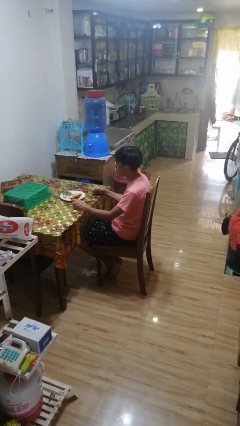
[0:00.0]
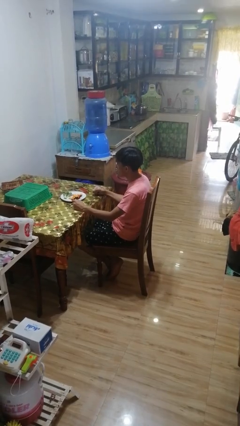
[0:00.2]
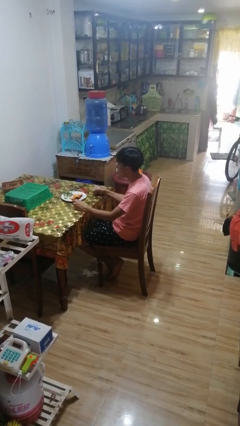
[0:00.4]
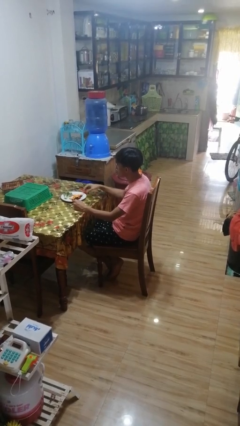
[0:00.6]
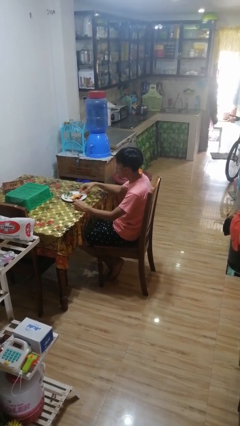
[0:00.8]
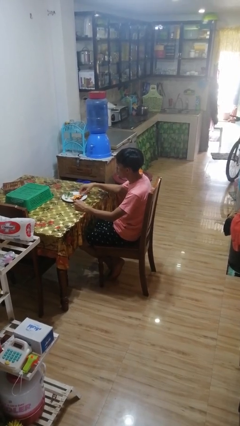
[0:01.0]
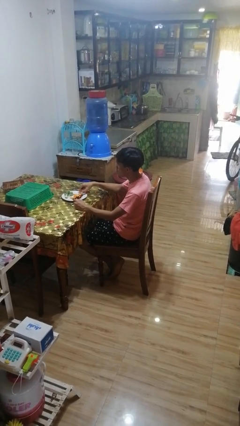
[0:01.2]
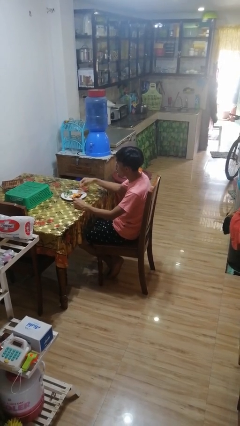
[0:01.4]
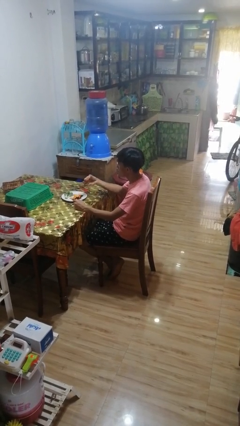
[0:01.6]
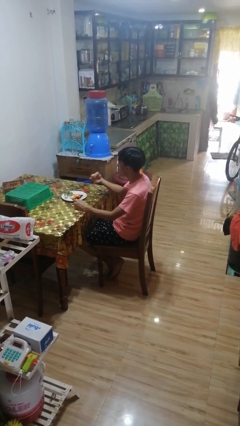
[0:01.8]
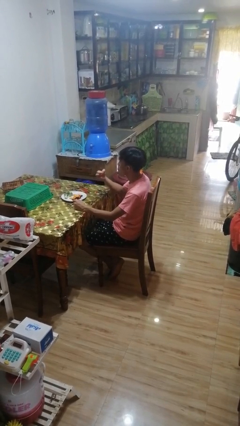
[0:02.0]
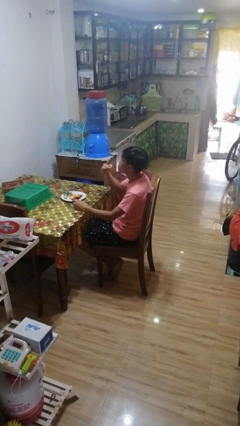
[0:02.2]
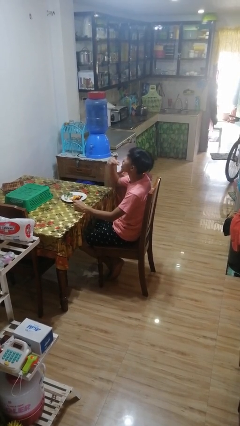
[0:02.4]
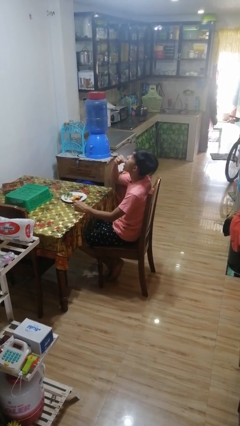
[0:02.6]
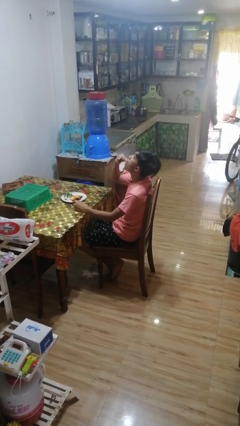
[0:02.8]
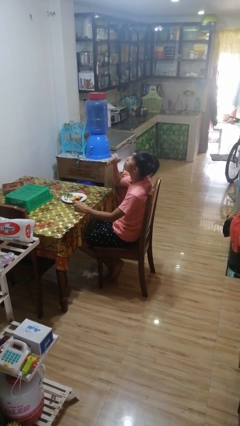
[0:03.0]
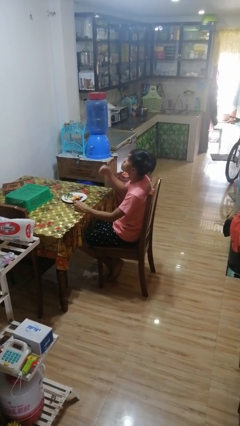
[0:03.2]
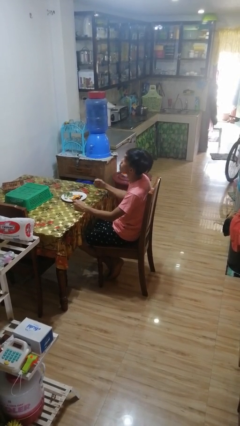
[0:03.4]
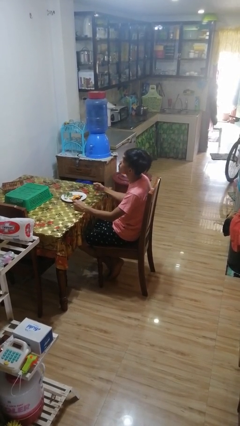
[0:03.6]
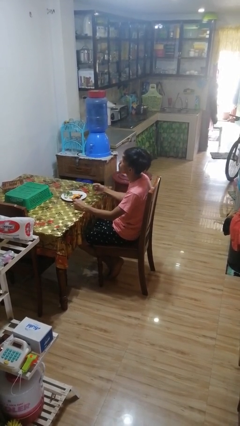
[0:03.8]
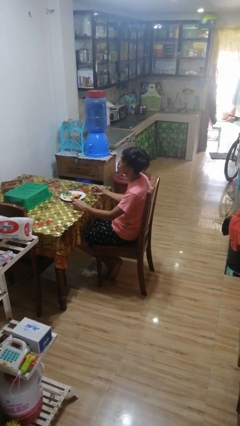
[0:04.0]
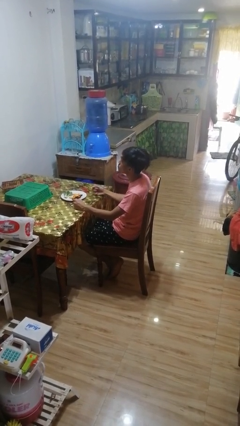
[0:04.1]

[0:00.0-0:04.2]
person eats with hands

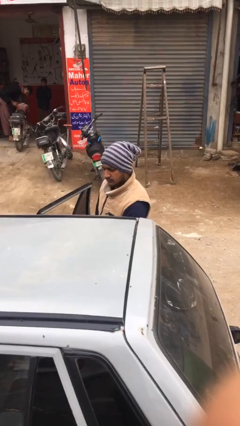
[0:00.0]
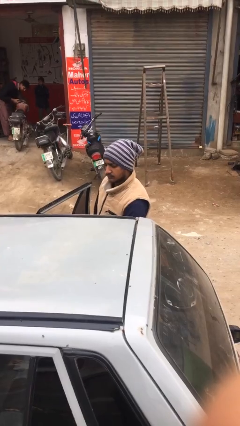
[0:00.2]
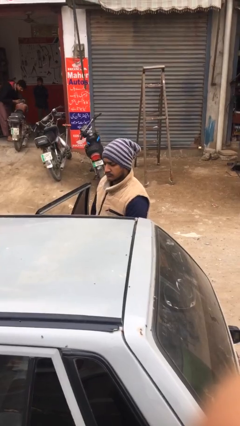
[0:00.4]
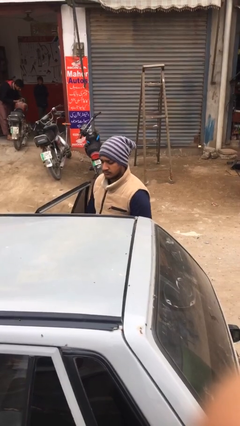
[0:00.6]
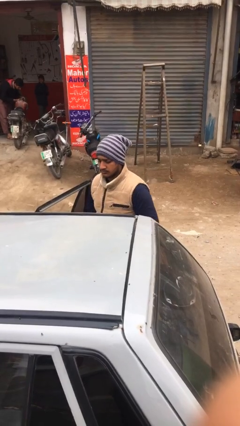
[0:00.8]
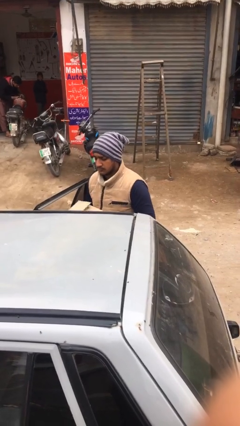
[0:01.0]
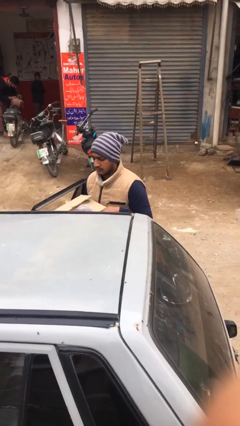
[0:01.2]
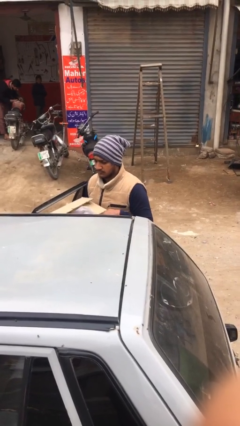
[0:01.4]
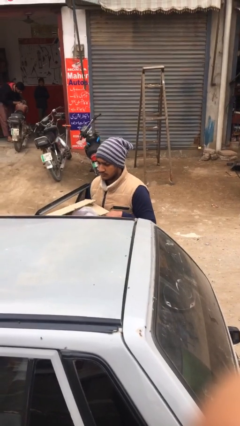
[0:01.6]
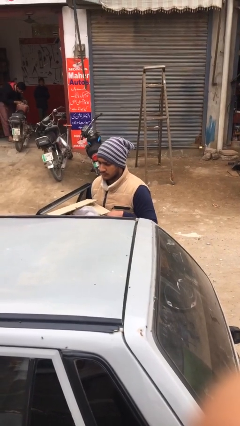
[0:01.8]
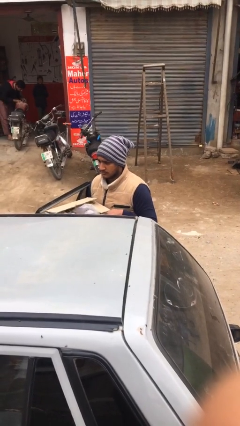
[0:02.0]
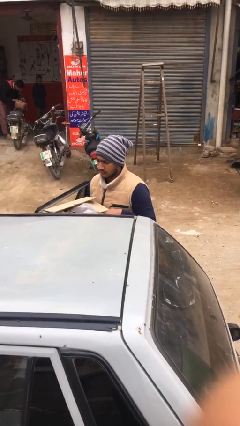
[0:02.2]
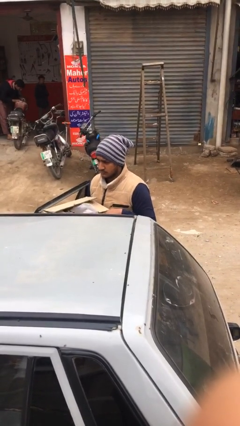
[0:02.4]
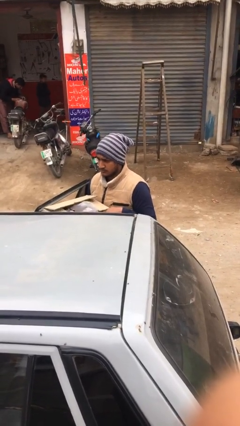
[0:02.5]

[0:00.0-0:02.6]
person unloads car

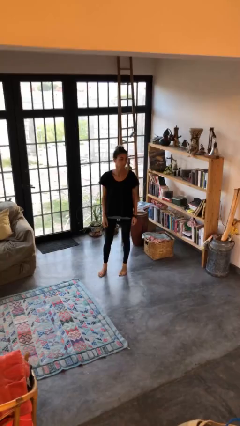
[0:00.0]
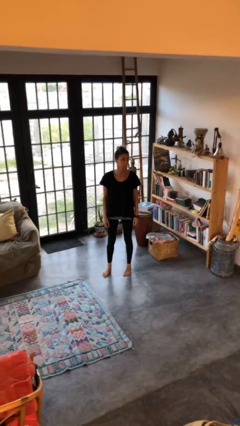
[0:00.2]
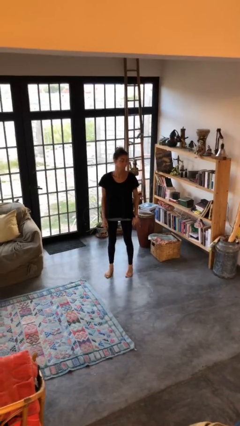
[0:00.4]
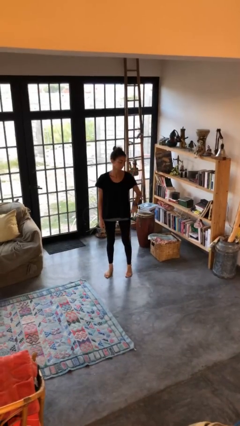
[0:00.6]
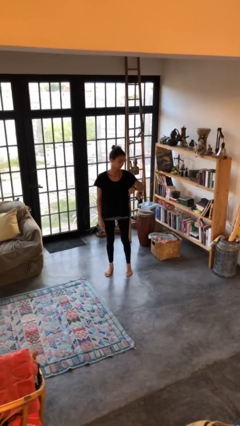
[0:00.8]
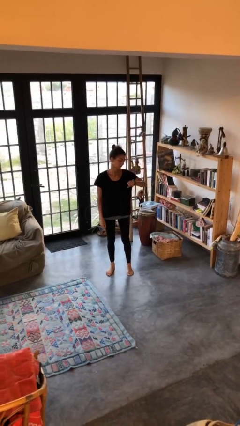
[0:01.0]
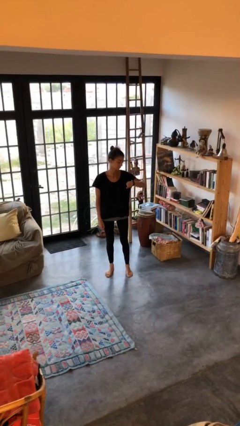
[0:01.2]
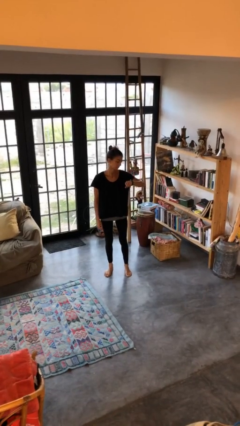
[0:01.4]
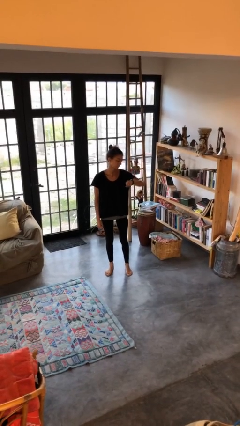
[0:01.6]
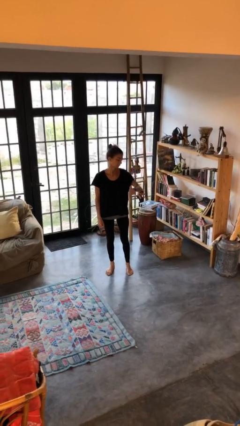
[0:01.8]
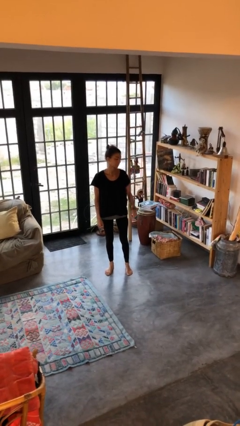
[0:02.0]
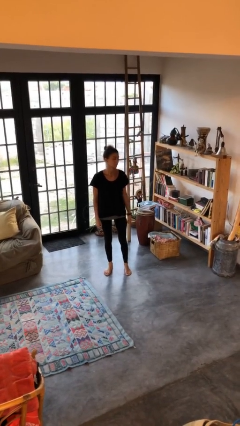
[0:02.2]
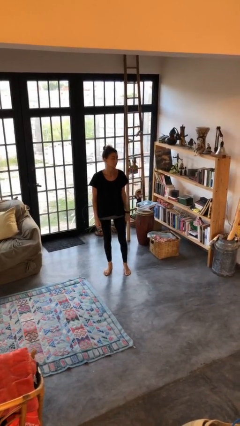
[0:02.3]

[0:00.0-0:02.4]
person looks at wristwatch

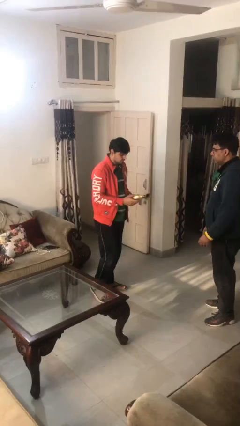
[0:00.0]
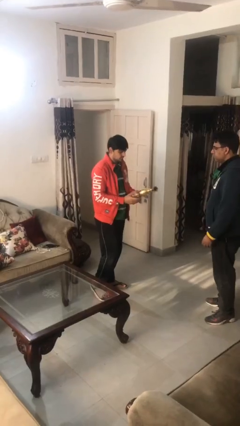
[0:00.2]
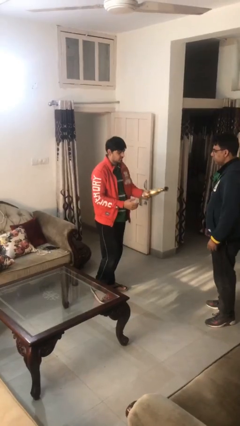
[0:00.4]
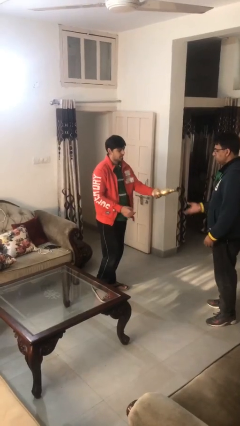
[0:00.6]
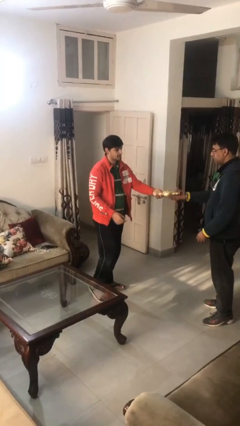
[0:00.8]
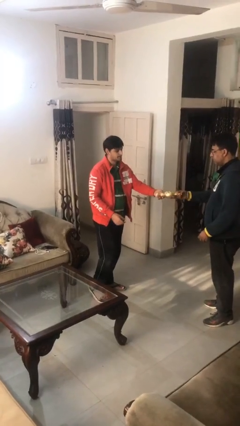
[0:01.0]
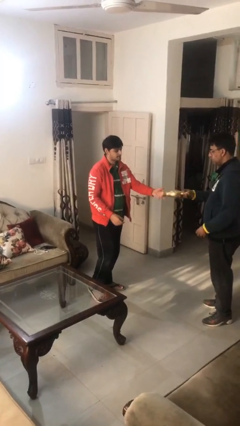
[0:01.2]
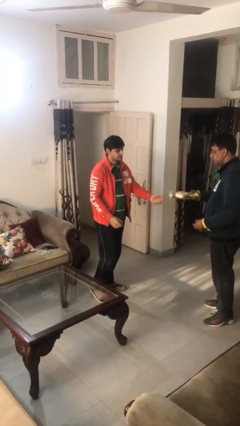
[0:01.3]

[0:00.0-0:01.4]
person transfers object to person

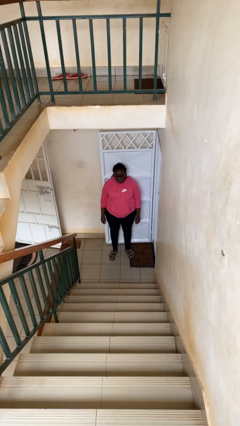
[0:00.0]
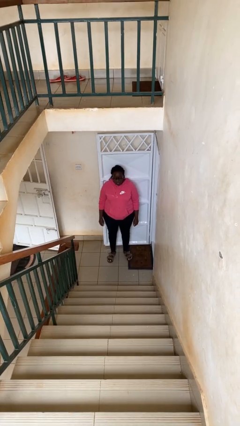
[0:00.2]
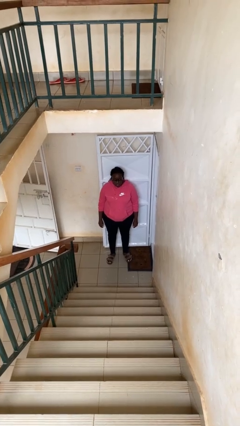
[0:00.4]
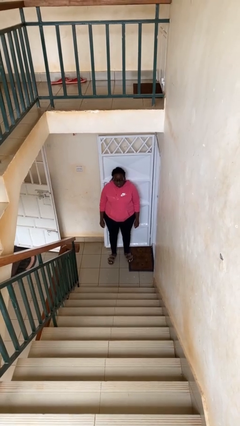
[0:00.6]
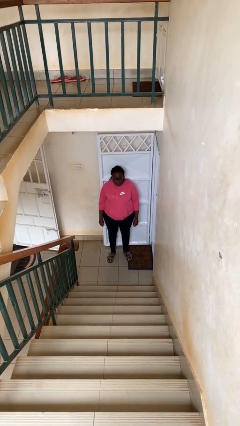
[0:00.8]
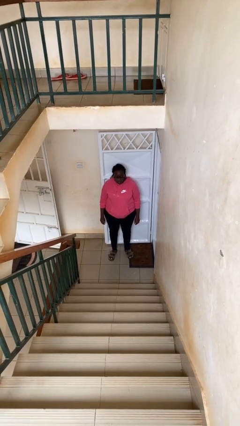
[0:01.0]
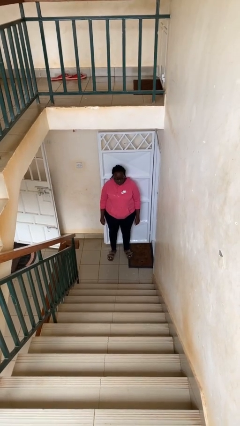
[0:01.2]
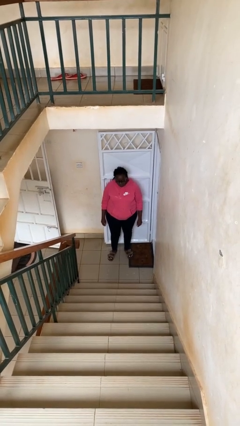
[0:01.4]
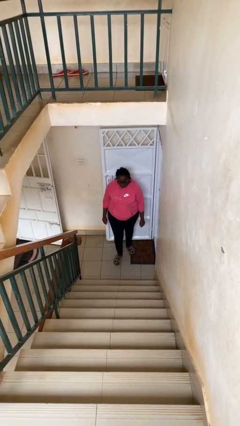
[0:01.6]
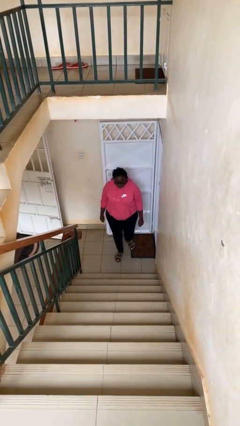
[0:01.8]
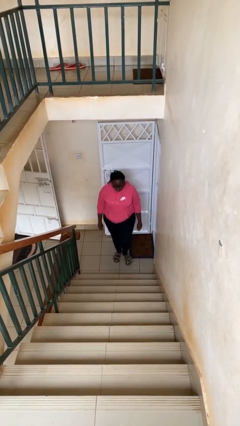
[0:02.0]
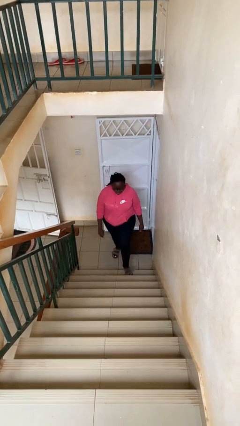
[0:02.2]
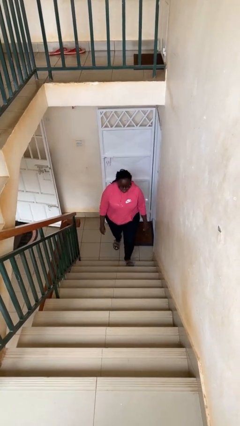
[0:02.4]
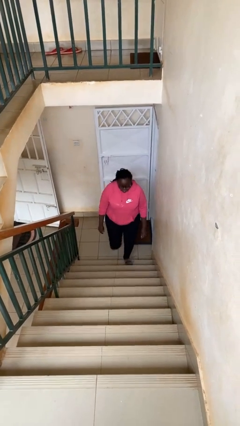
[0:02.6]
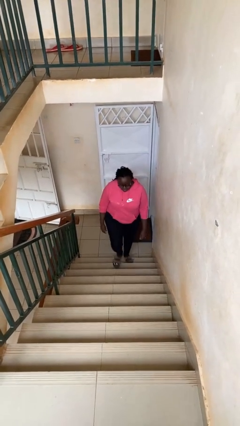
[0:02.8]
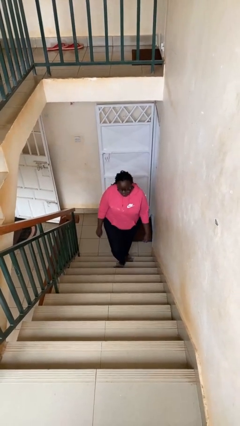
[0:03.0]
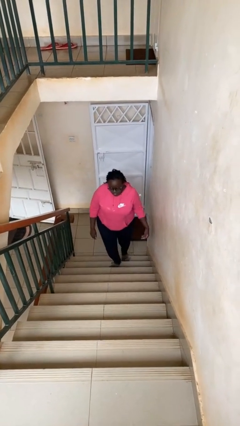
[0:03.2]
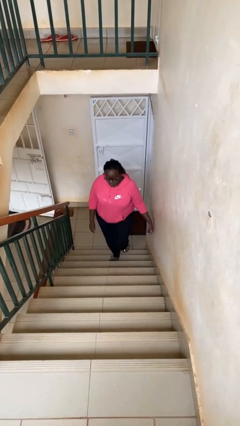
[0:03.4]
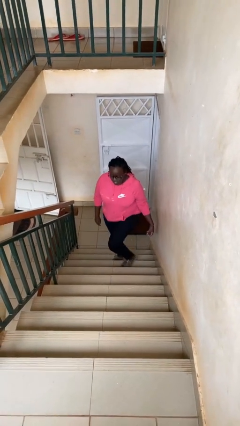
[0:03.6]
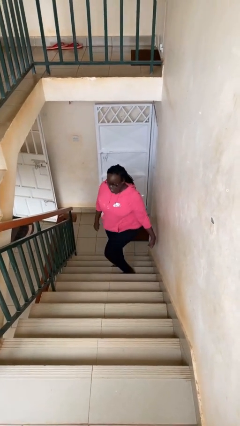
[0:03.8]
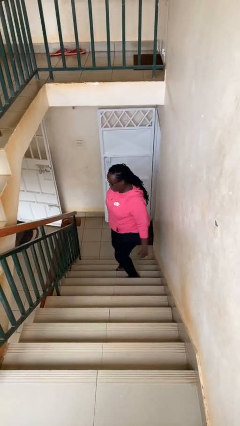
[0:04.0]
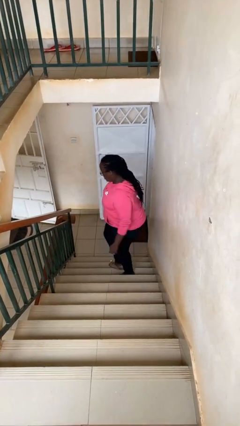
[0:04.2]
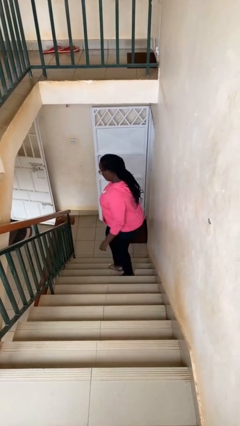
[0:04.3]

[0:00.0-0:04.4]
person climbs up stairs

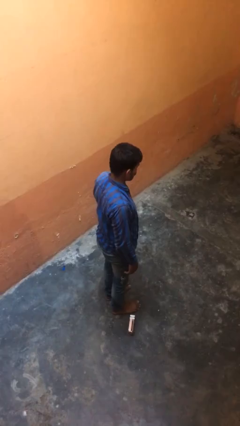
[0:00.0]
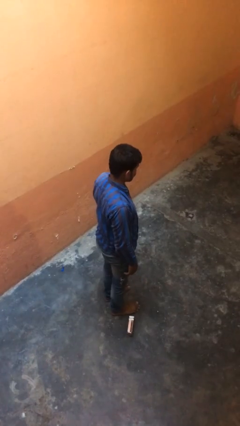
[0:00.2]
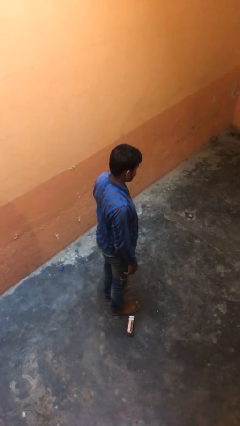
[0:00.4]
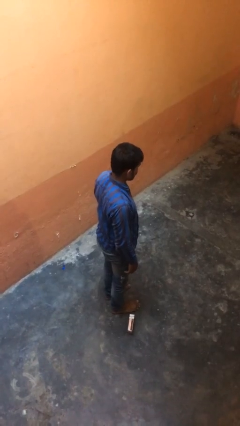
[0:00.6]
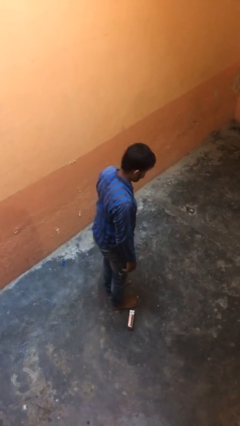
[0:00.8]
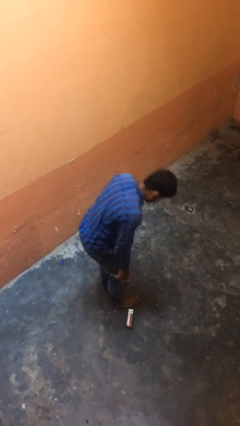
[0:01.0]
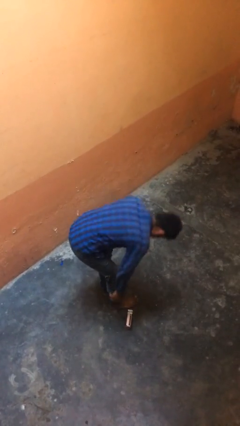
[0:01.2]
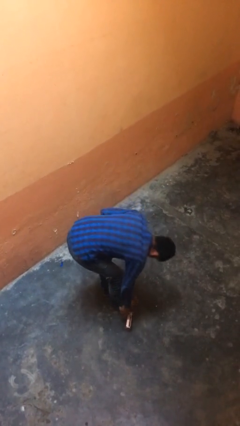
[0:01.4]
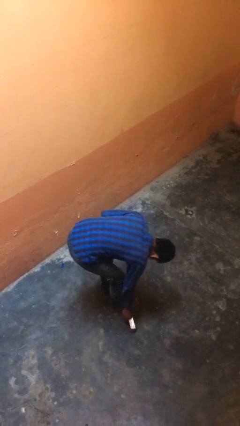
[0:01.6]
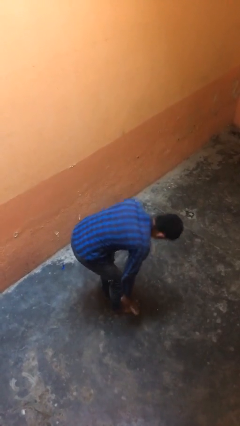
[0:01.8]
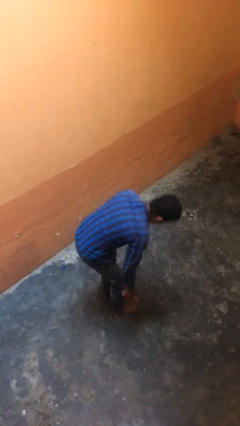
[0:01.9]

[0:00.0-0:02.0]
person picks up object from floor

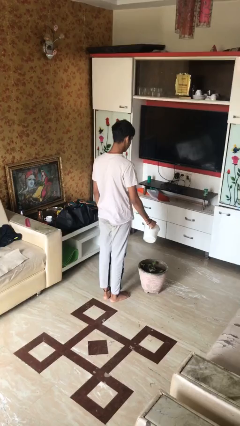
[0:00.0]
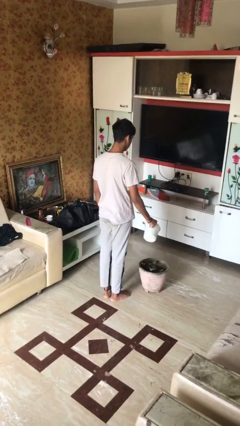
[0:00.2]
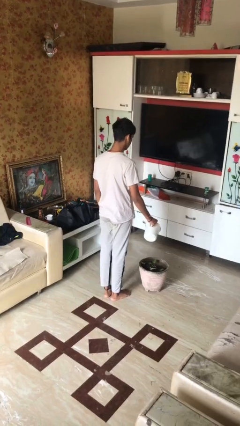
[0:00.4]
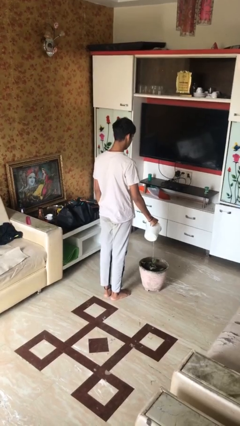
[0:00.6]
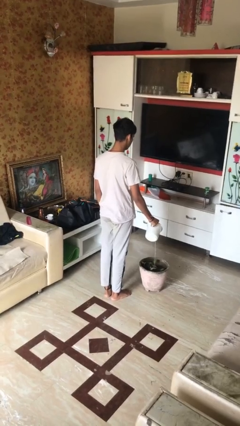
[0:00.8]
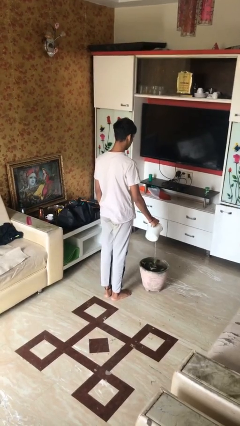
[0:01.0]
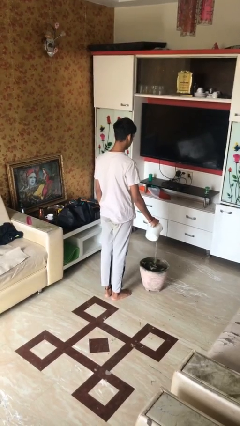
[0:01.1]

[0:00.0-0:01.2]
person waters houseplant
